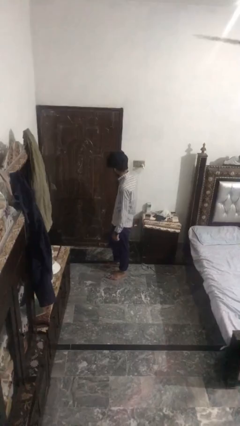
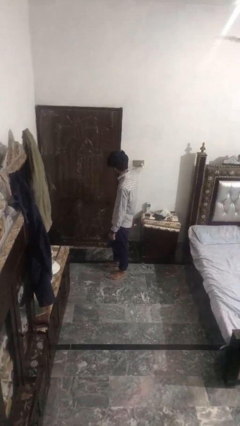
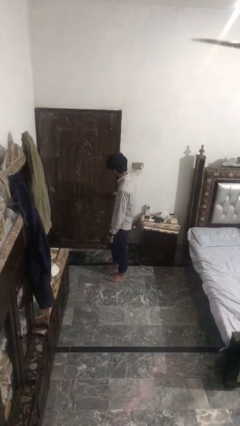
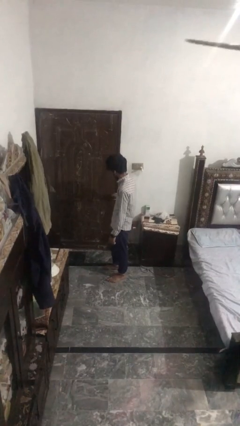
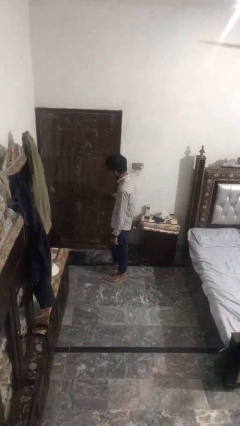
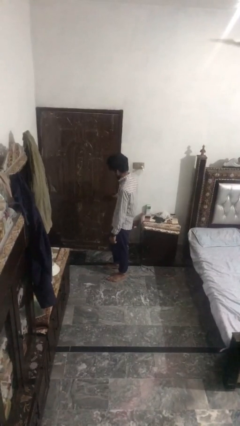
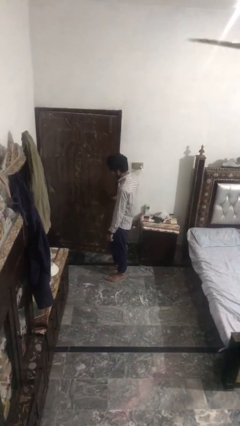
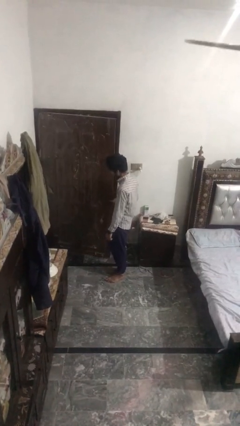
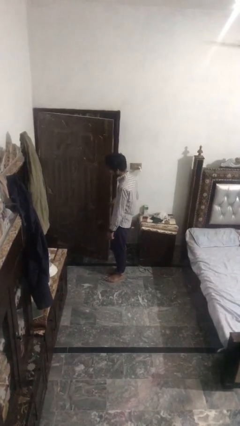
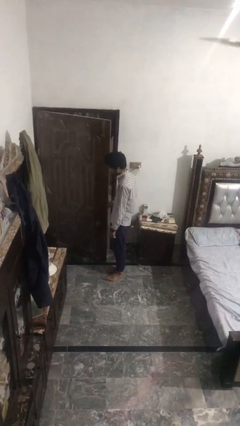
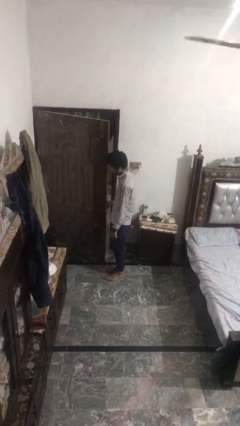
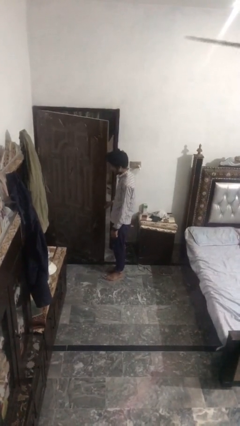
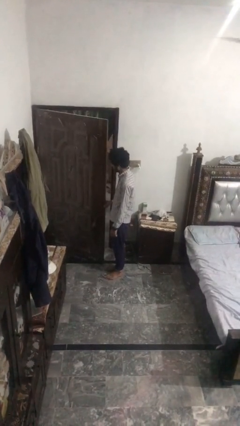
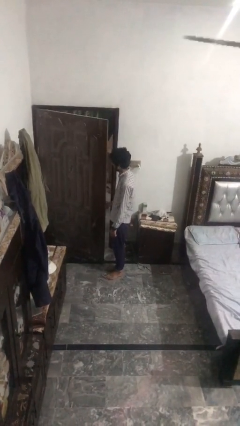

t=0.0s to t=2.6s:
person opens facility door

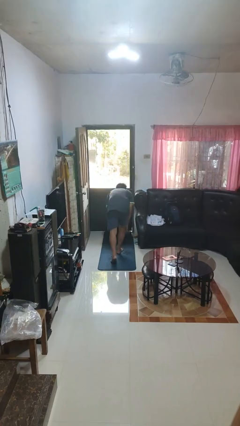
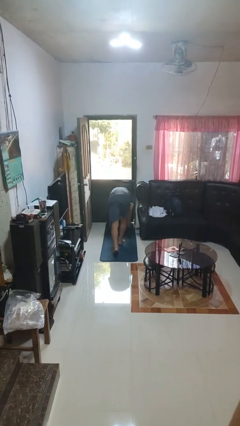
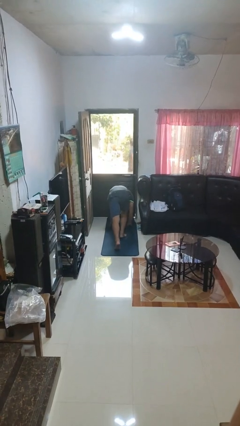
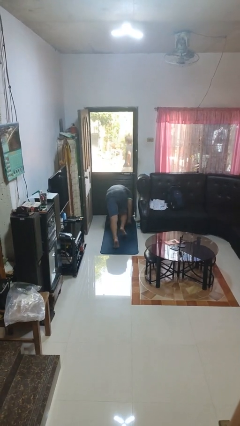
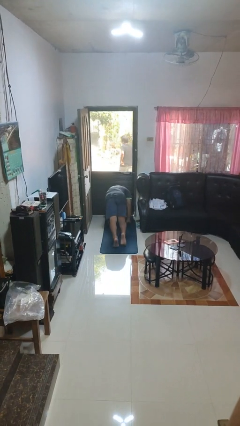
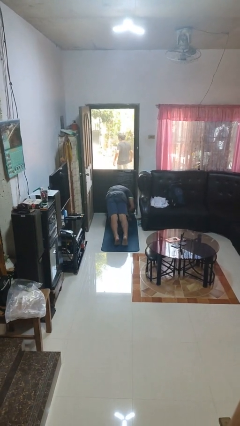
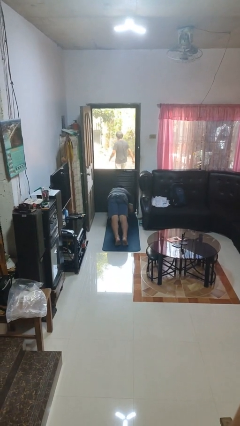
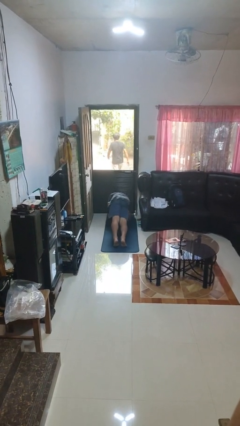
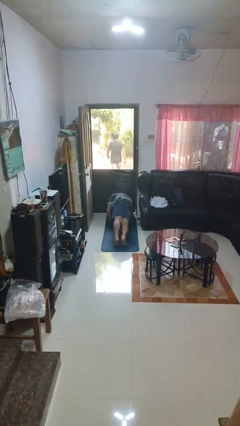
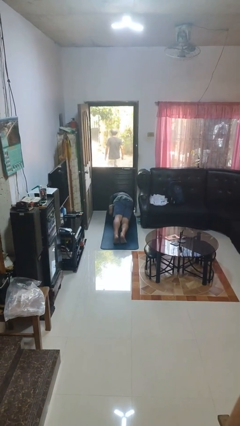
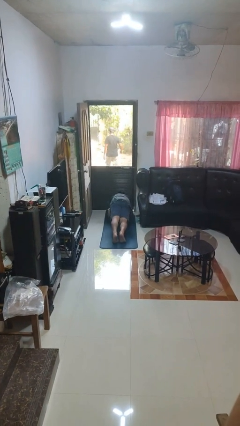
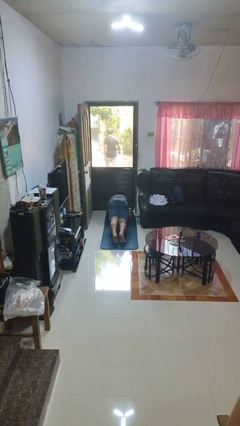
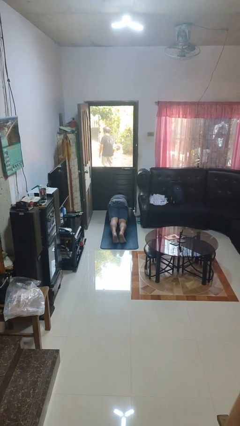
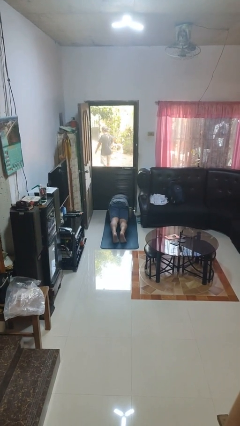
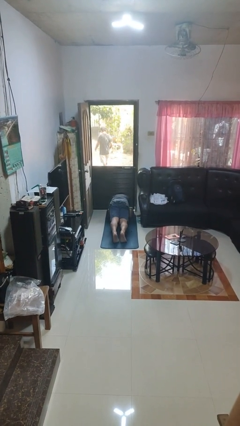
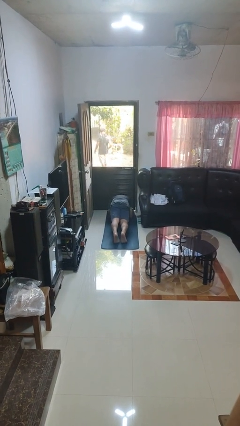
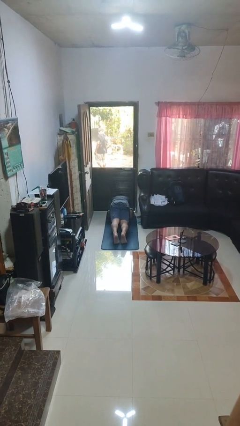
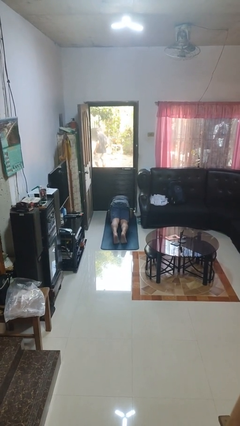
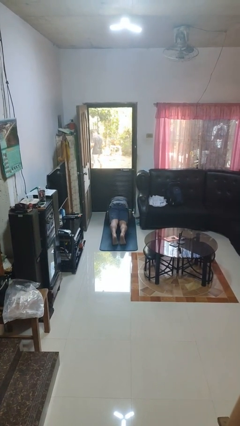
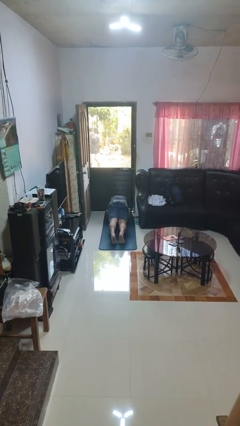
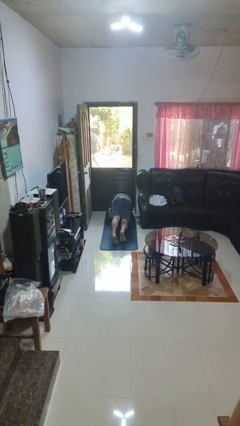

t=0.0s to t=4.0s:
person exercises with plank

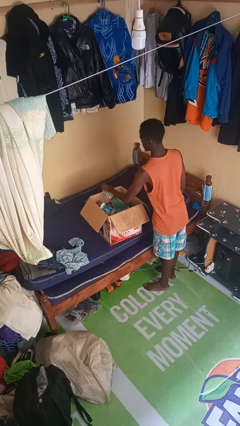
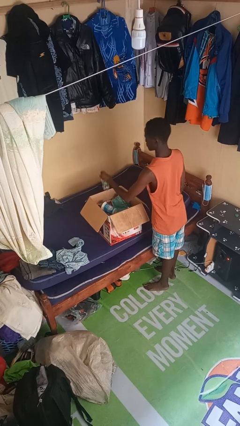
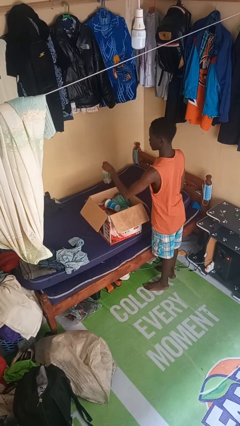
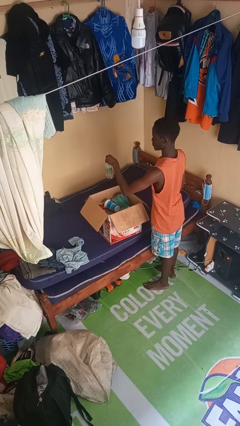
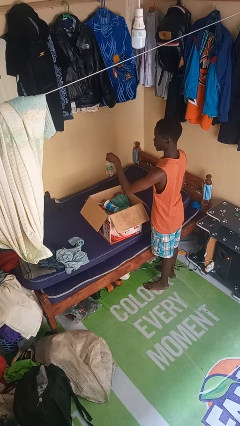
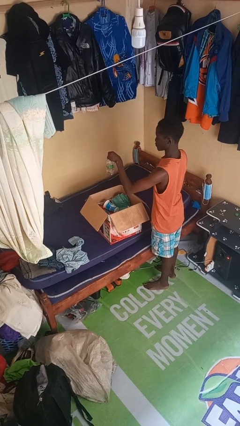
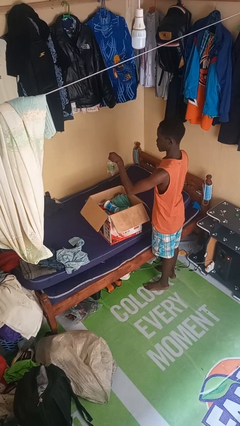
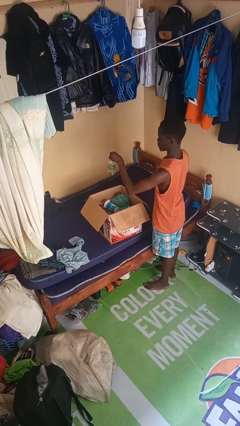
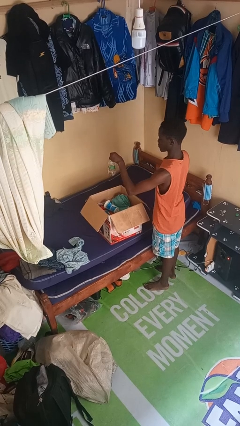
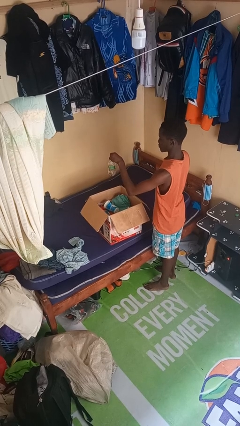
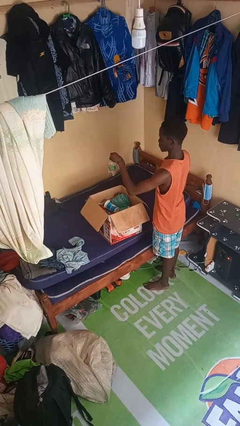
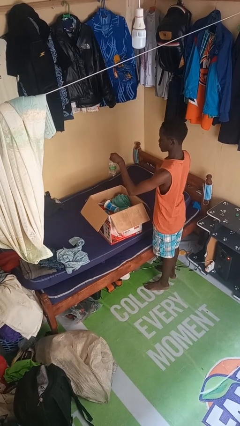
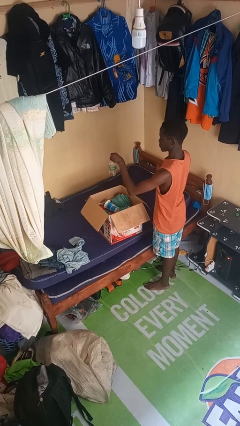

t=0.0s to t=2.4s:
person takes object from box

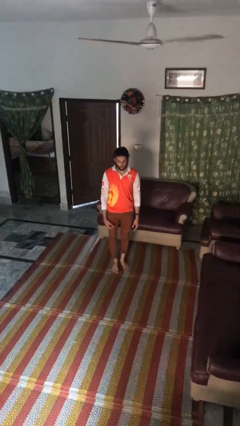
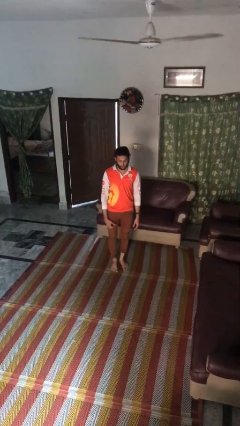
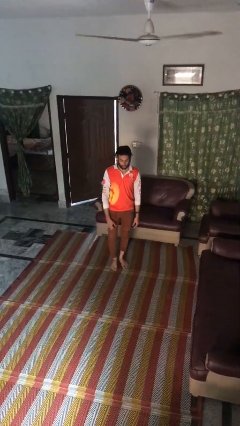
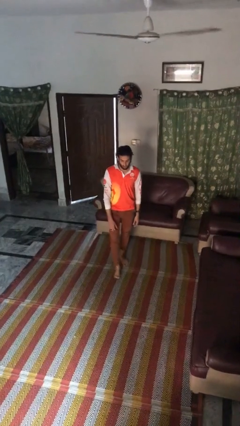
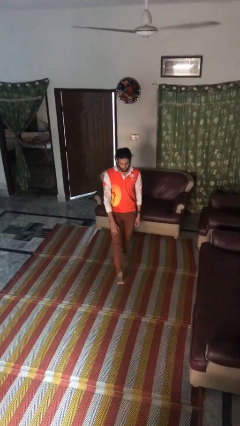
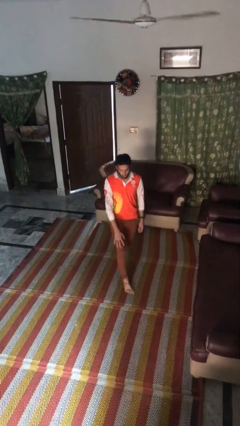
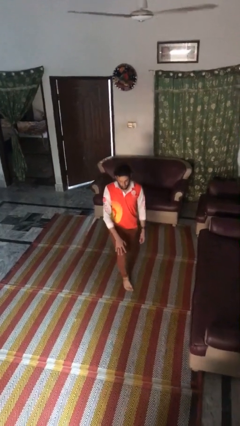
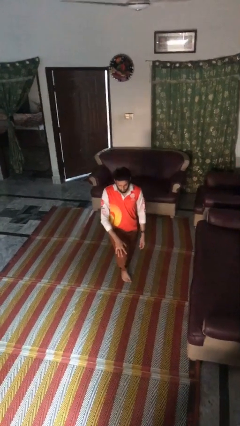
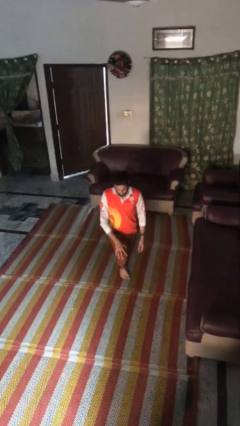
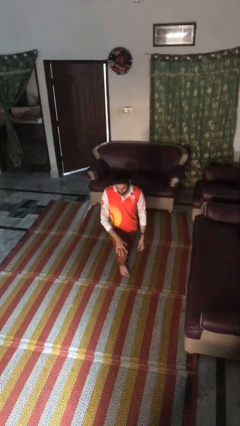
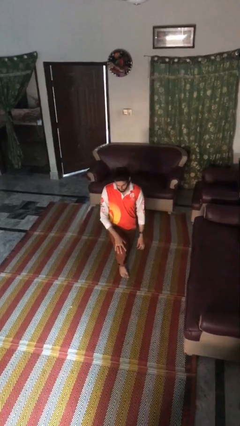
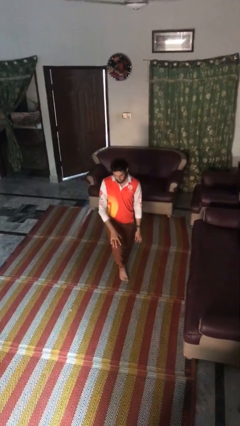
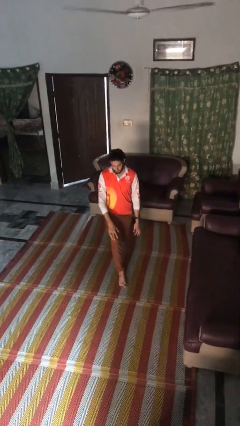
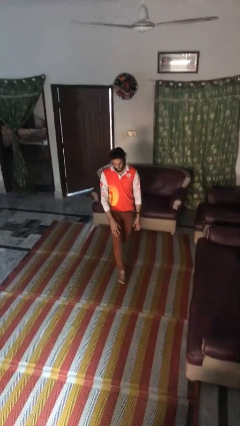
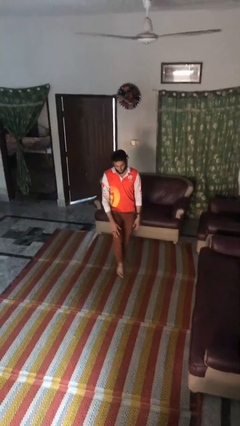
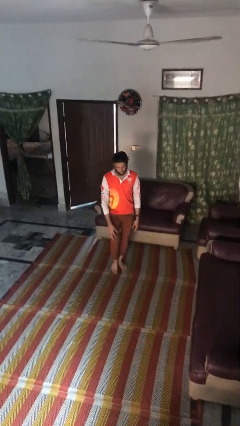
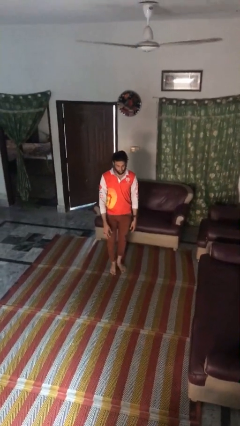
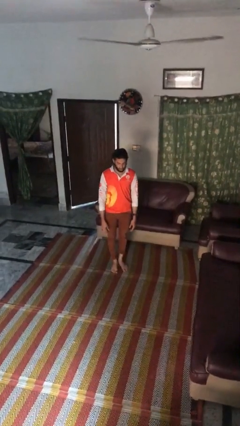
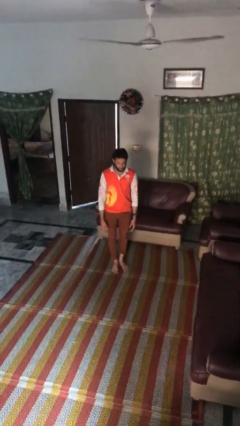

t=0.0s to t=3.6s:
person exercises with lunges

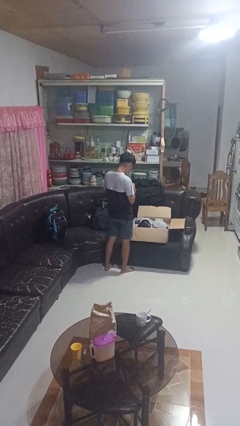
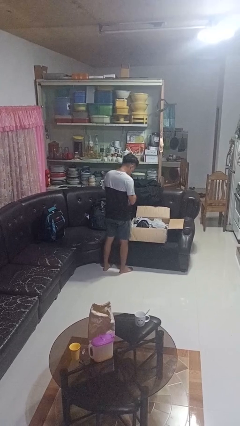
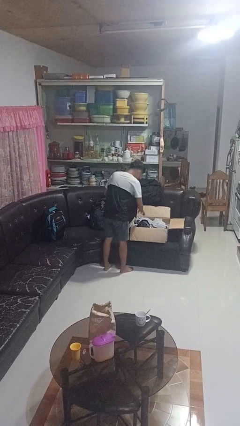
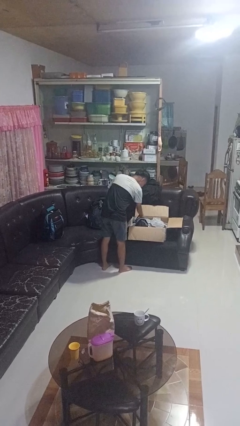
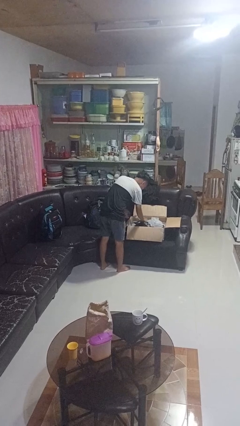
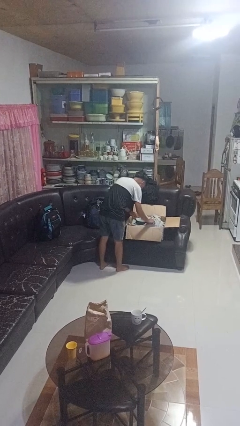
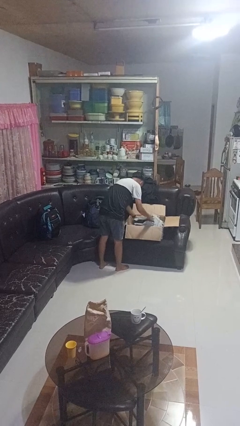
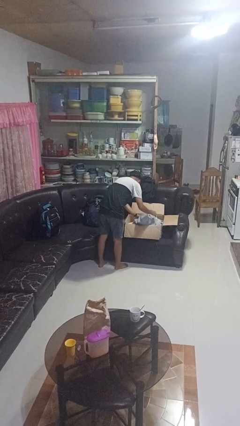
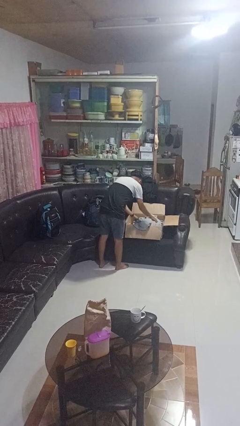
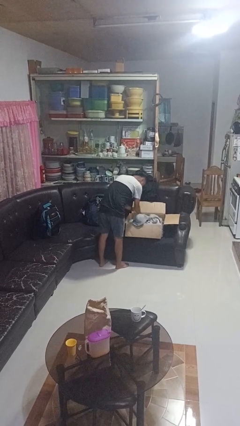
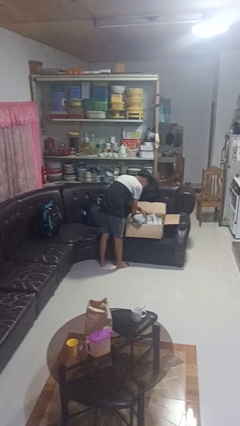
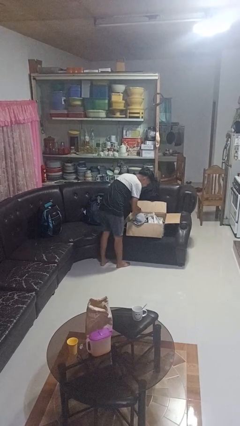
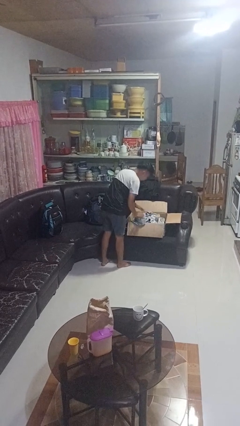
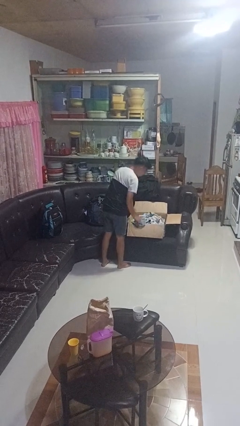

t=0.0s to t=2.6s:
person searches in box

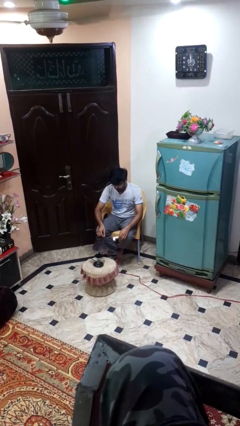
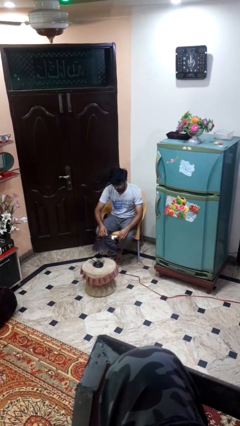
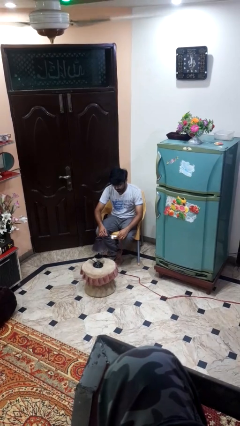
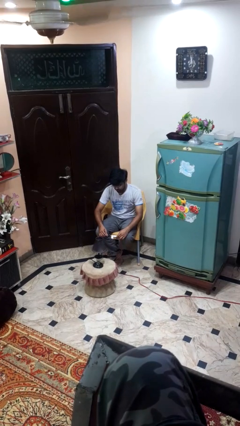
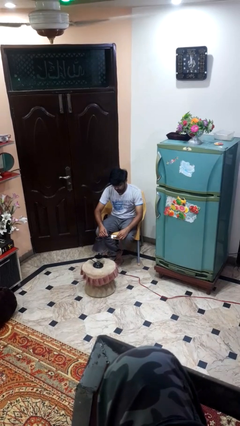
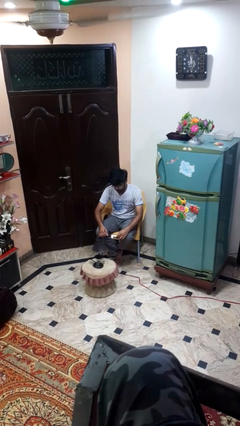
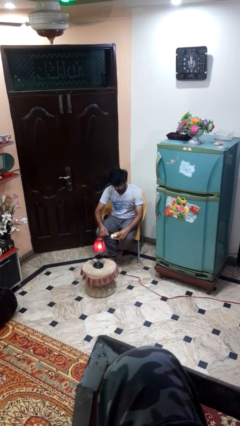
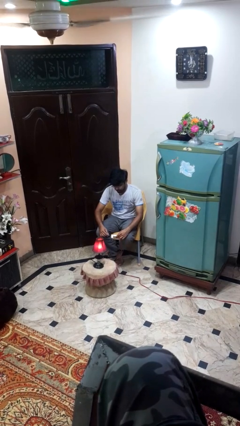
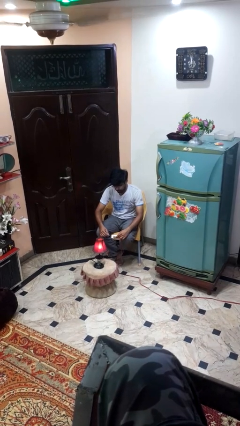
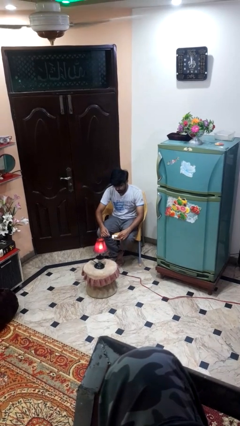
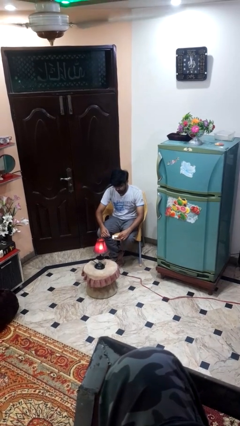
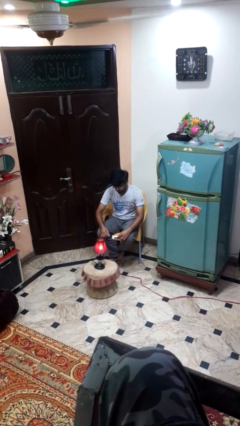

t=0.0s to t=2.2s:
person turns on lamp

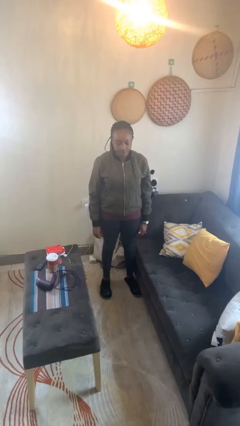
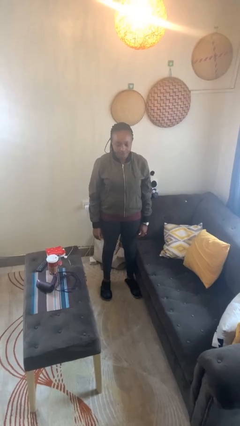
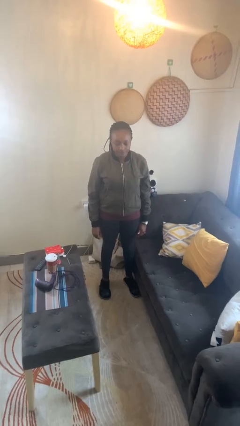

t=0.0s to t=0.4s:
person gestures arms x
